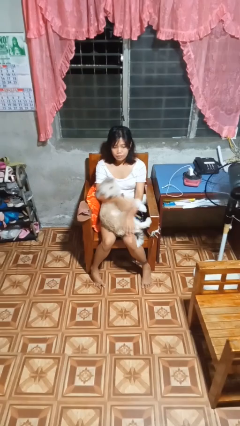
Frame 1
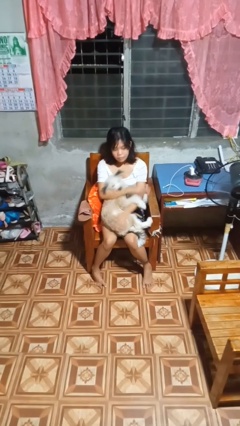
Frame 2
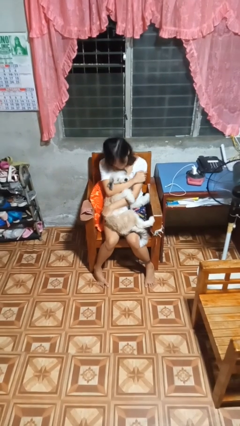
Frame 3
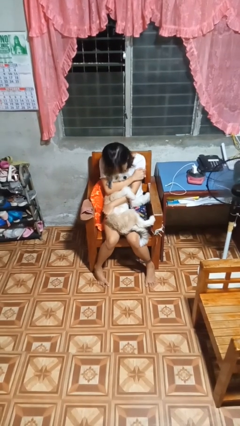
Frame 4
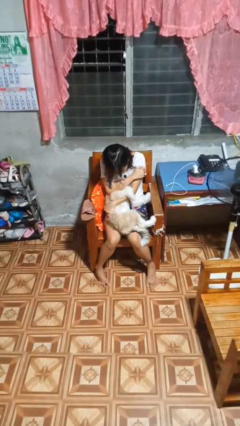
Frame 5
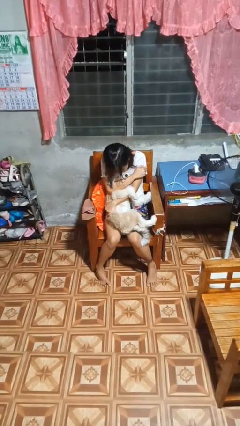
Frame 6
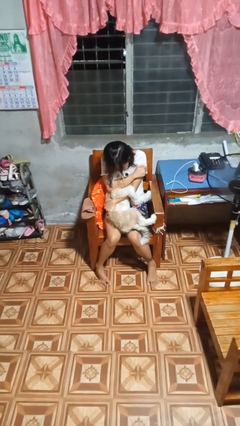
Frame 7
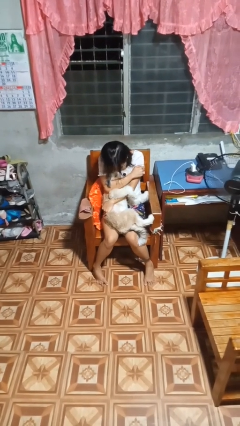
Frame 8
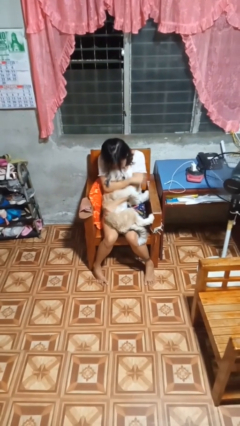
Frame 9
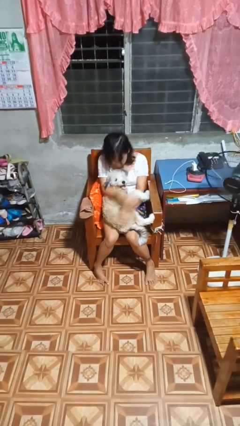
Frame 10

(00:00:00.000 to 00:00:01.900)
person hugs dog

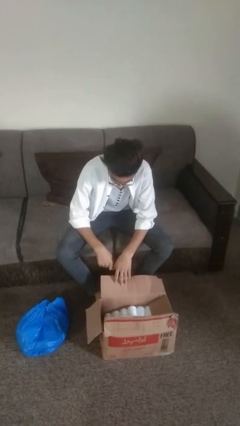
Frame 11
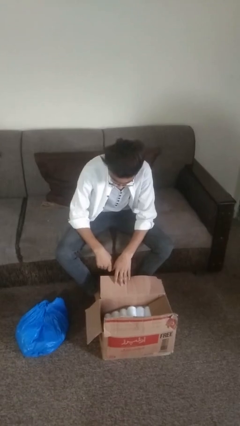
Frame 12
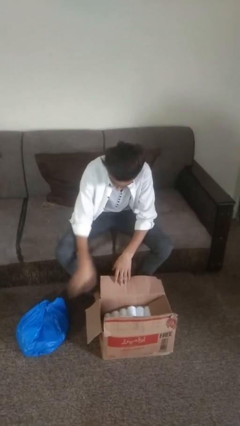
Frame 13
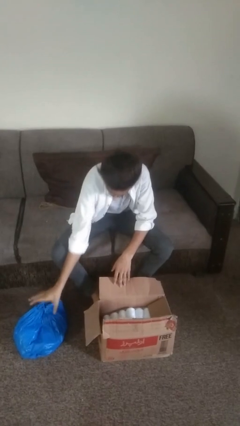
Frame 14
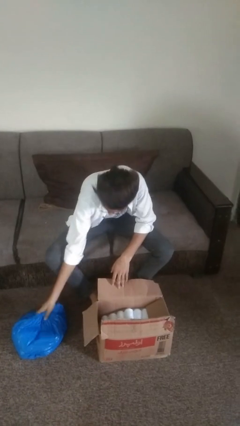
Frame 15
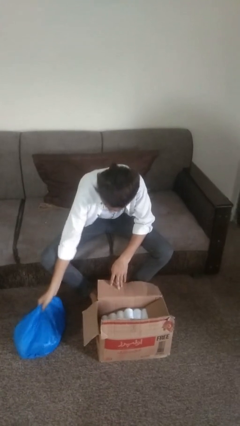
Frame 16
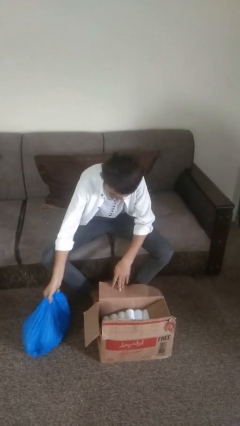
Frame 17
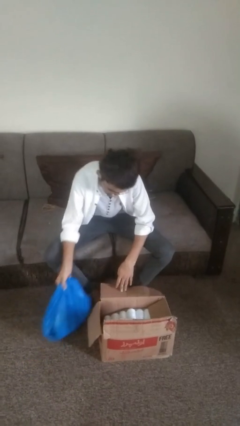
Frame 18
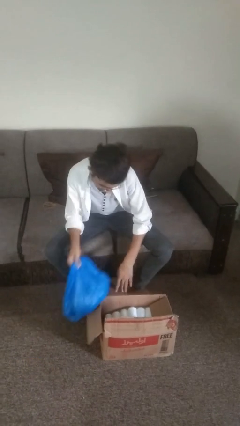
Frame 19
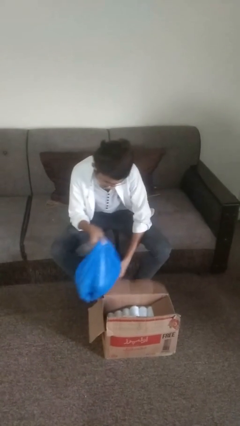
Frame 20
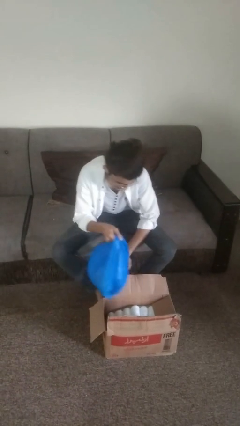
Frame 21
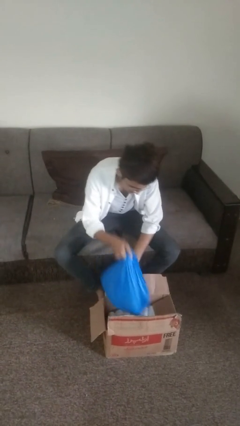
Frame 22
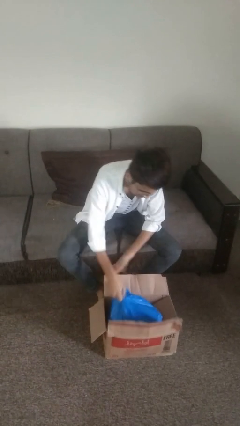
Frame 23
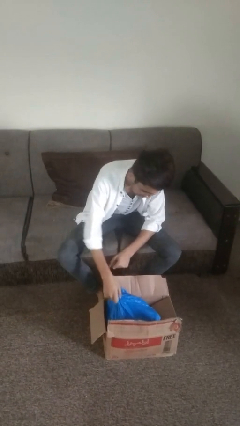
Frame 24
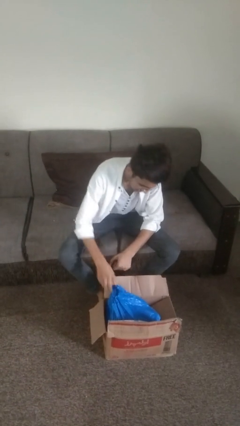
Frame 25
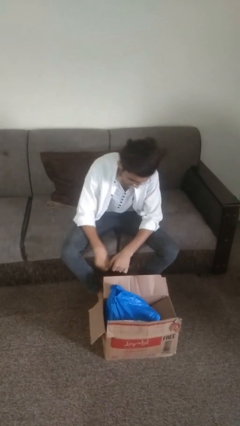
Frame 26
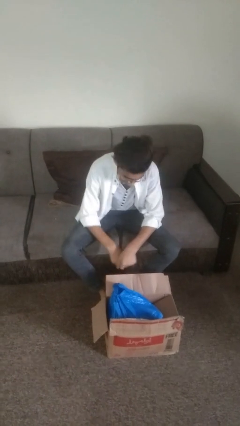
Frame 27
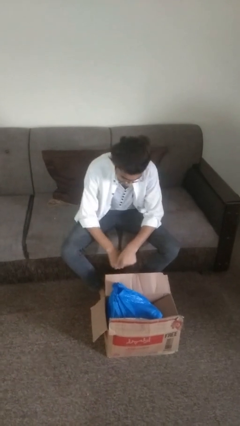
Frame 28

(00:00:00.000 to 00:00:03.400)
person puts object into box

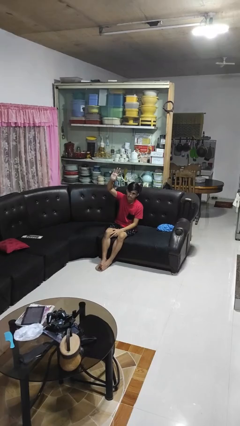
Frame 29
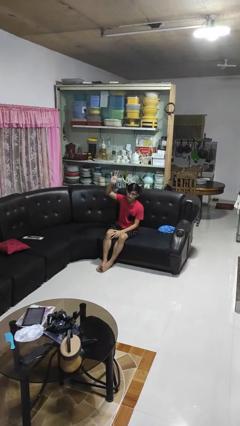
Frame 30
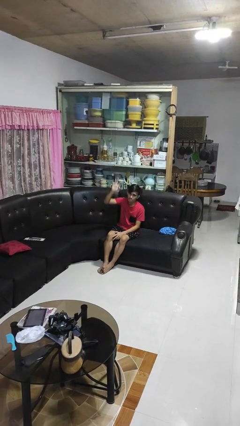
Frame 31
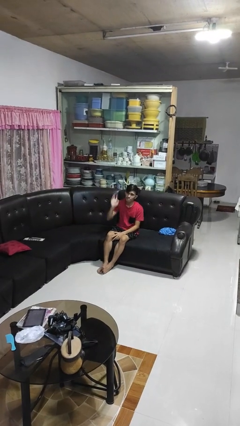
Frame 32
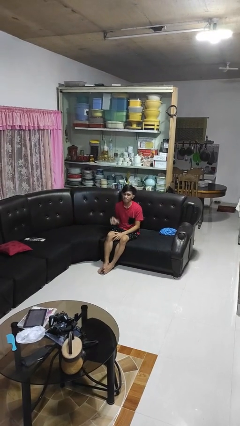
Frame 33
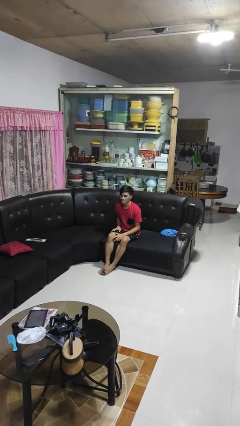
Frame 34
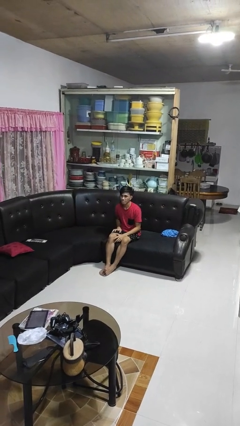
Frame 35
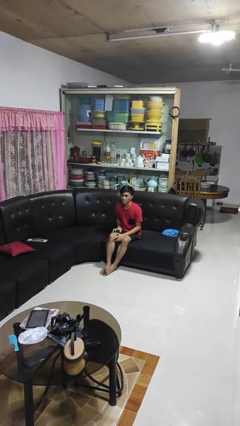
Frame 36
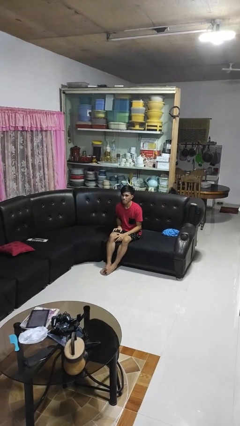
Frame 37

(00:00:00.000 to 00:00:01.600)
person gestures lower hand

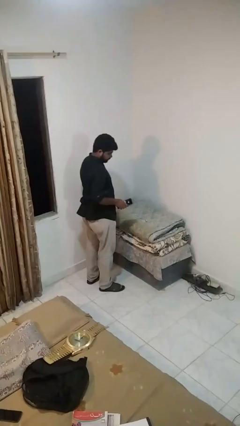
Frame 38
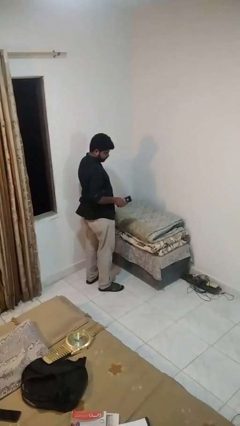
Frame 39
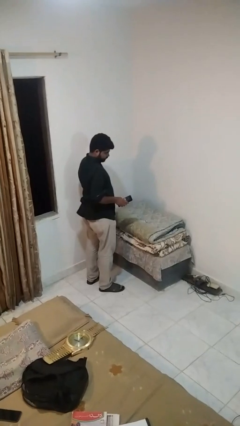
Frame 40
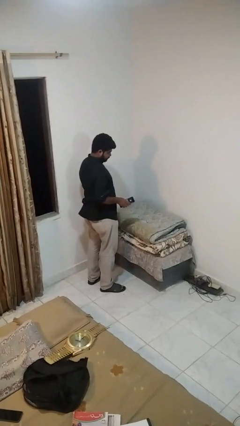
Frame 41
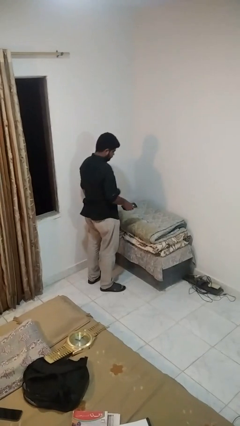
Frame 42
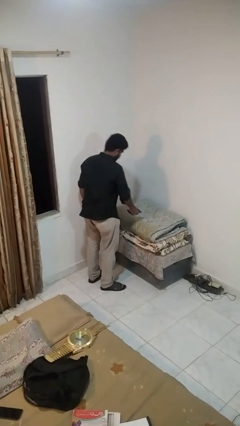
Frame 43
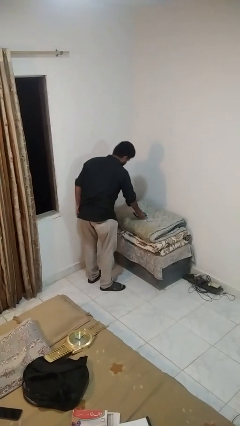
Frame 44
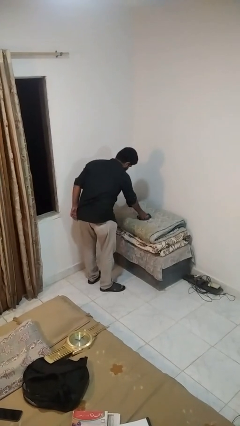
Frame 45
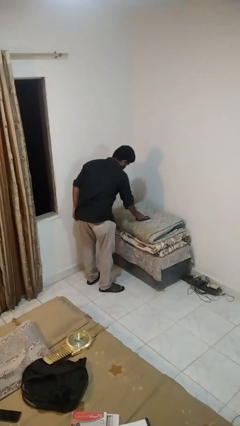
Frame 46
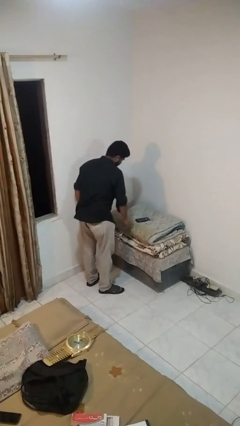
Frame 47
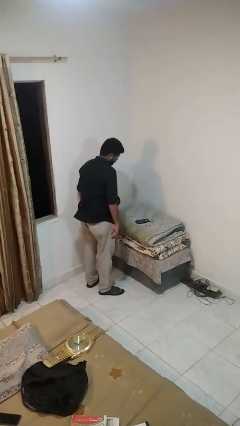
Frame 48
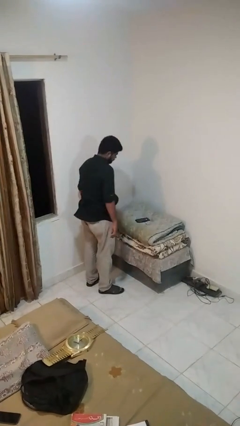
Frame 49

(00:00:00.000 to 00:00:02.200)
person puts down object on couch

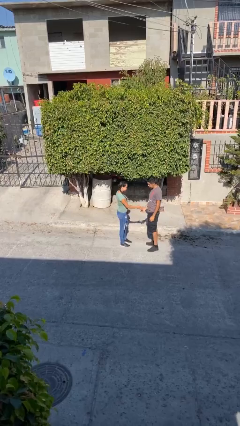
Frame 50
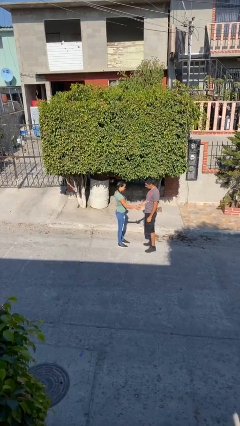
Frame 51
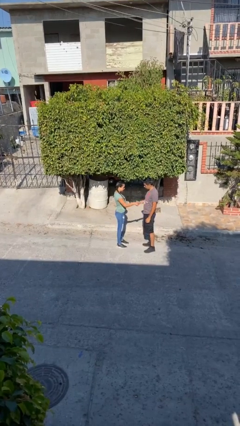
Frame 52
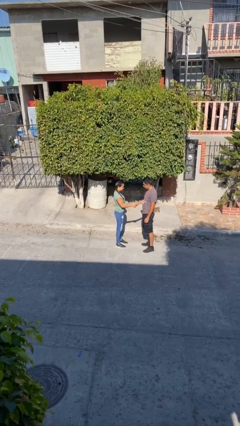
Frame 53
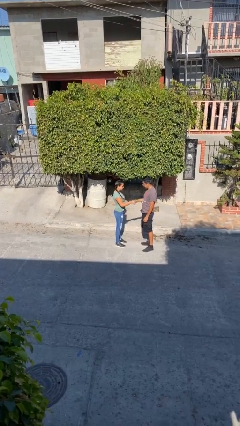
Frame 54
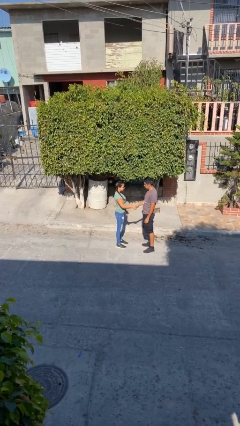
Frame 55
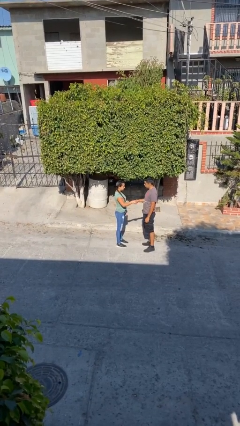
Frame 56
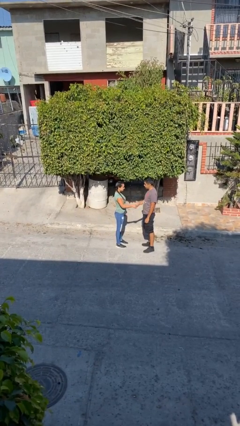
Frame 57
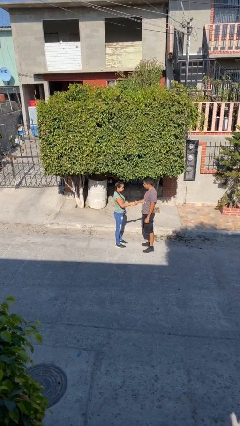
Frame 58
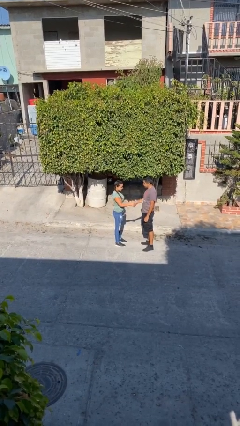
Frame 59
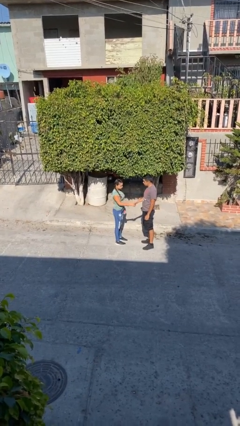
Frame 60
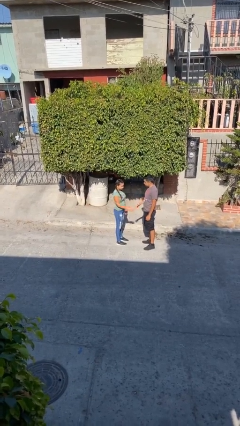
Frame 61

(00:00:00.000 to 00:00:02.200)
person shakes hand

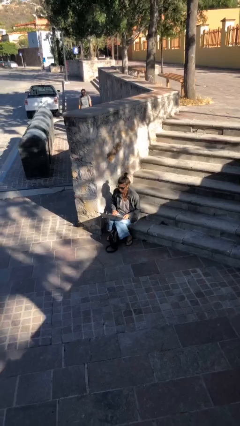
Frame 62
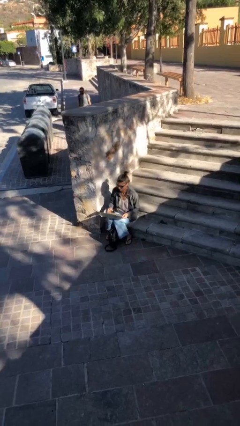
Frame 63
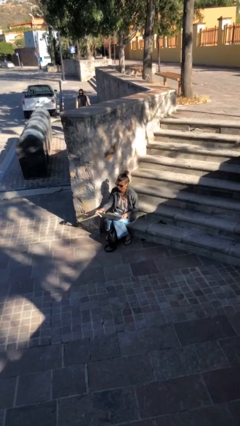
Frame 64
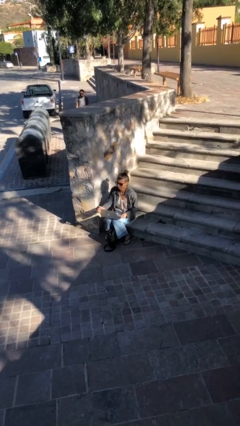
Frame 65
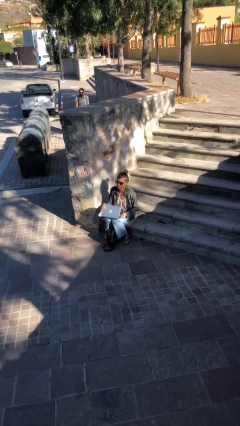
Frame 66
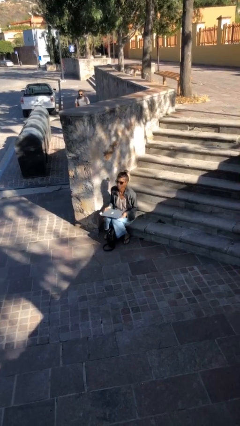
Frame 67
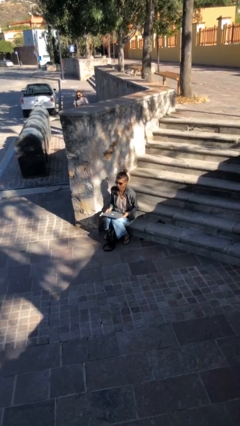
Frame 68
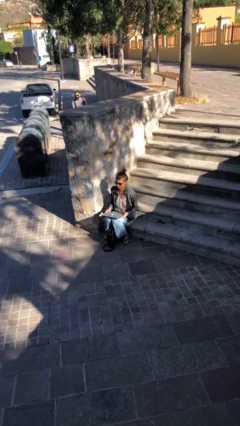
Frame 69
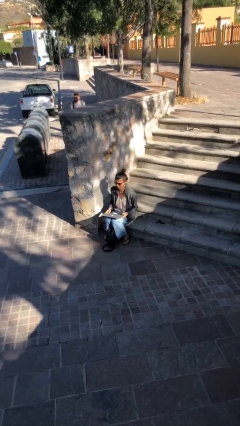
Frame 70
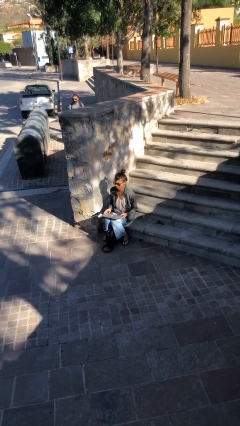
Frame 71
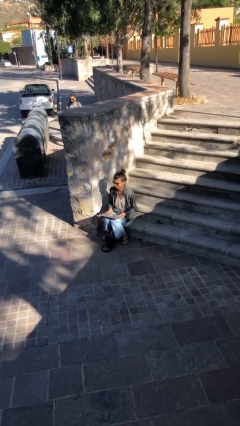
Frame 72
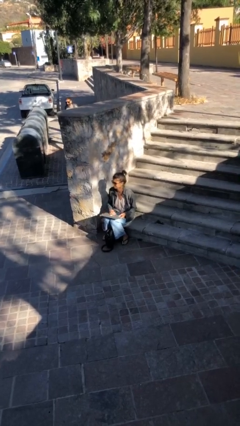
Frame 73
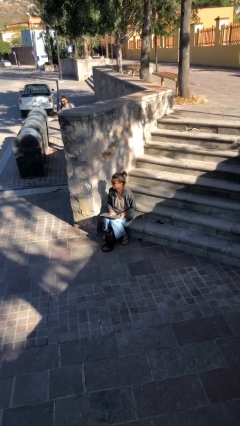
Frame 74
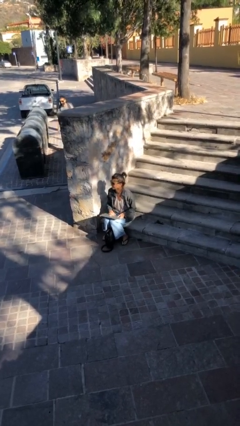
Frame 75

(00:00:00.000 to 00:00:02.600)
person interacts with laptop

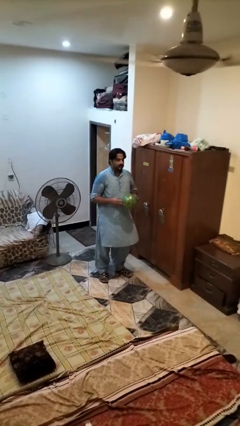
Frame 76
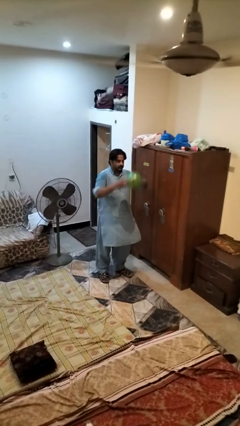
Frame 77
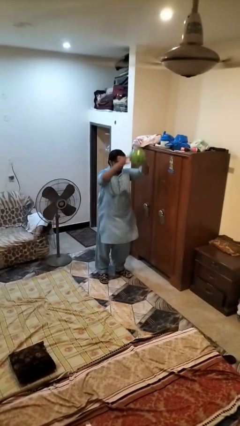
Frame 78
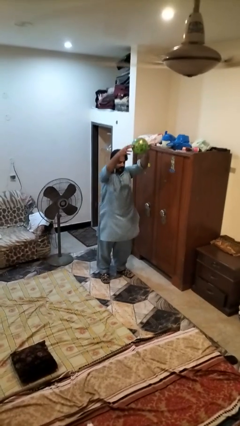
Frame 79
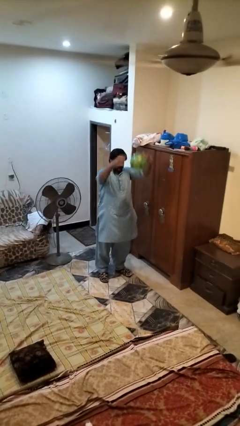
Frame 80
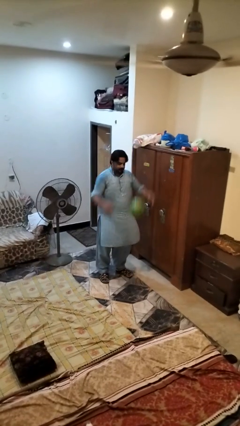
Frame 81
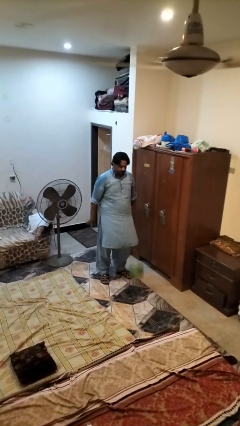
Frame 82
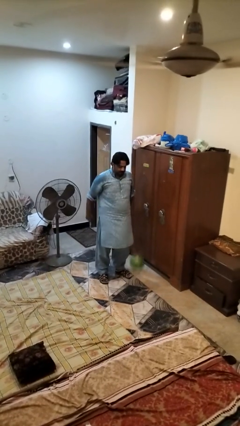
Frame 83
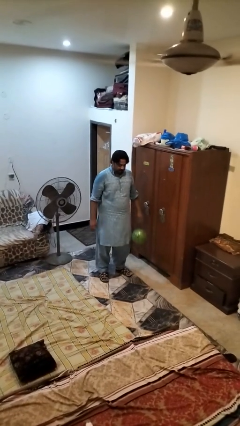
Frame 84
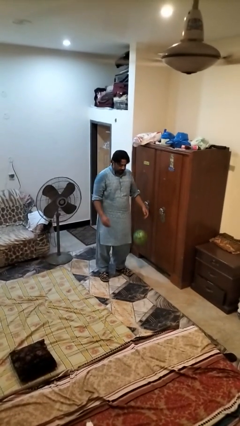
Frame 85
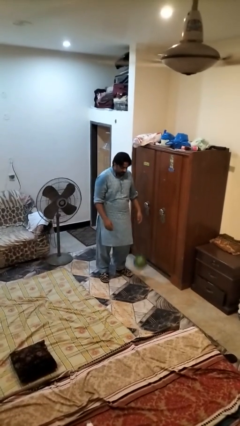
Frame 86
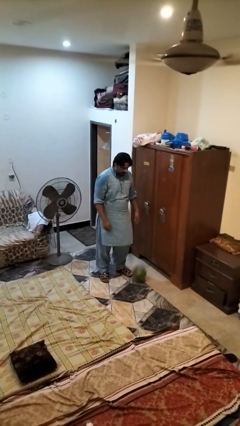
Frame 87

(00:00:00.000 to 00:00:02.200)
person drops object

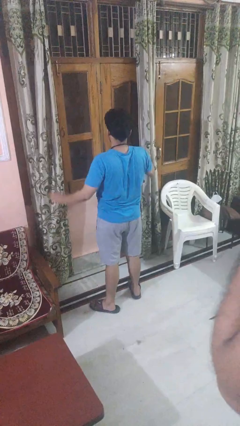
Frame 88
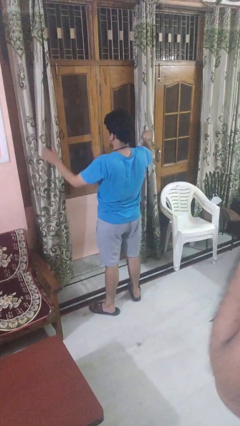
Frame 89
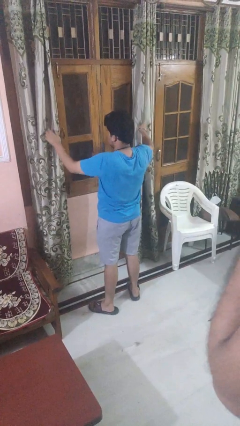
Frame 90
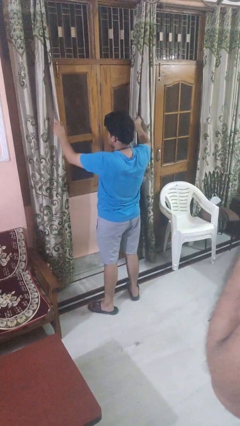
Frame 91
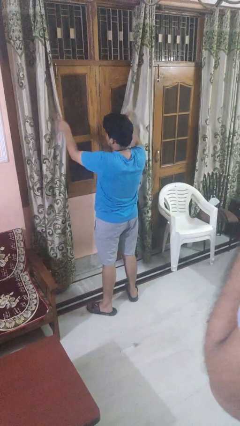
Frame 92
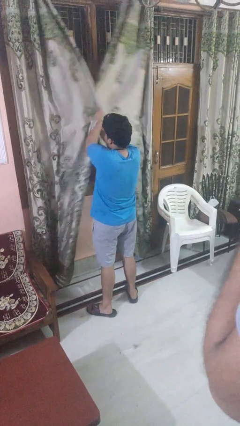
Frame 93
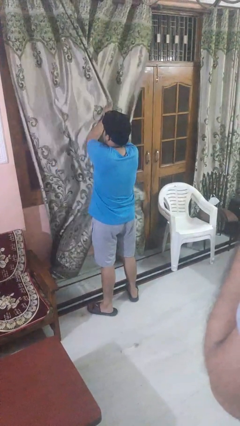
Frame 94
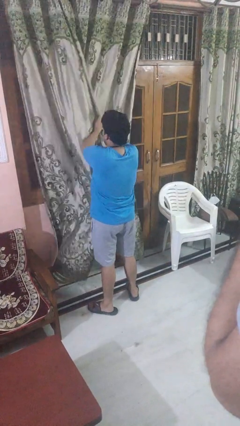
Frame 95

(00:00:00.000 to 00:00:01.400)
person closes curtains
